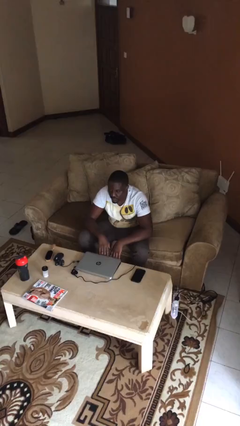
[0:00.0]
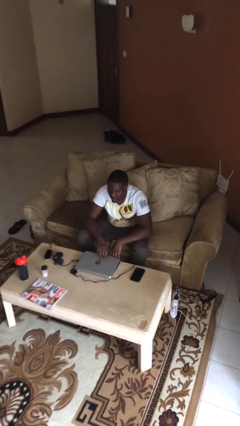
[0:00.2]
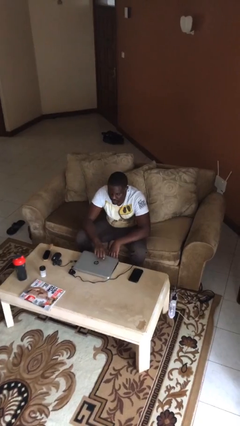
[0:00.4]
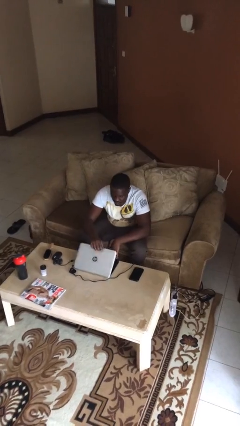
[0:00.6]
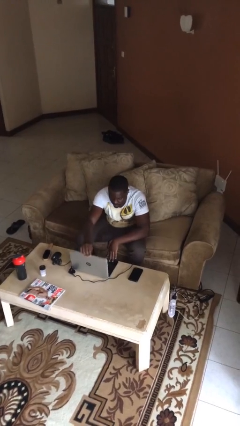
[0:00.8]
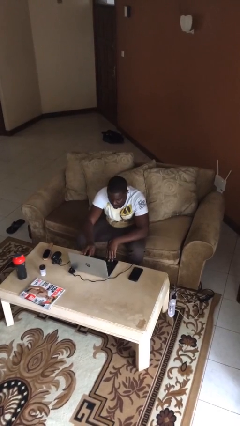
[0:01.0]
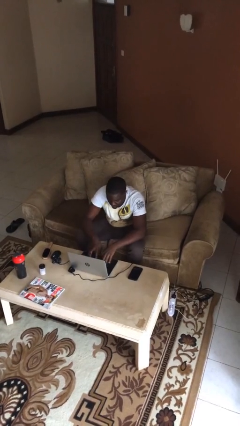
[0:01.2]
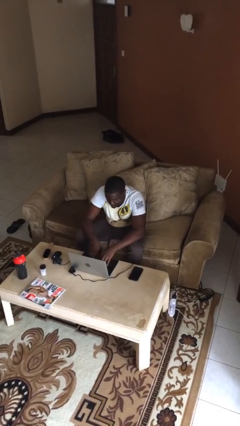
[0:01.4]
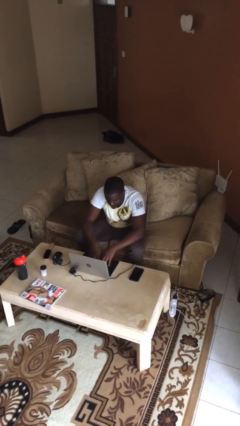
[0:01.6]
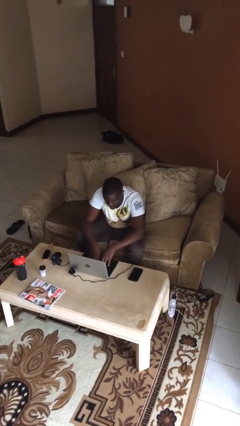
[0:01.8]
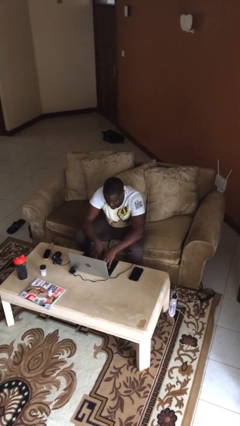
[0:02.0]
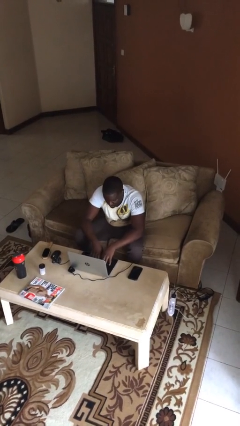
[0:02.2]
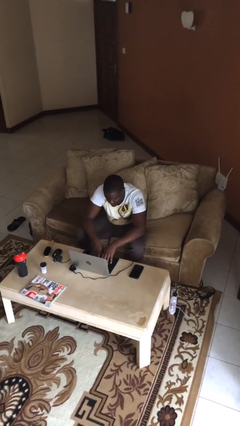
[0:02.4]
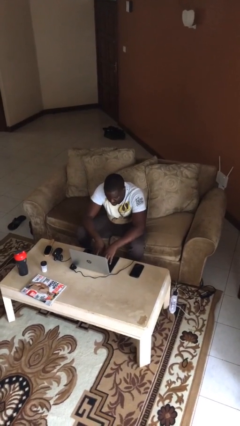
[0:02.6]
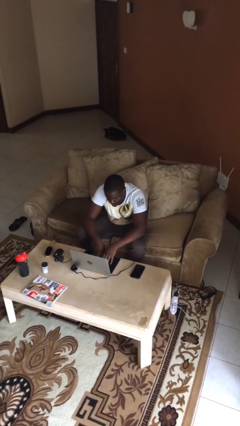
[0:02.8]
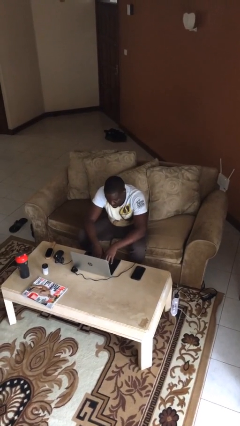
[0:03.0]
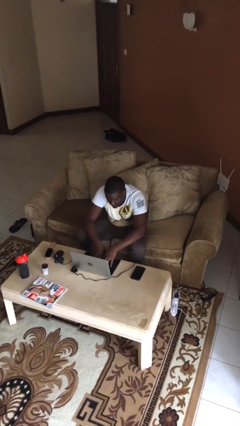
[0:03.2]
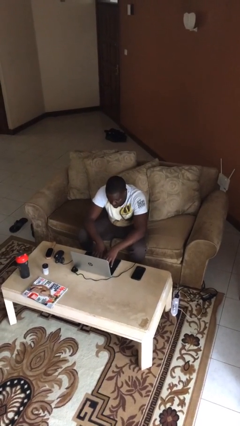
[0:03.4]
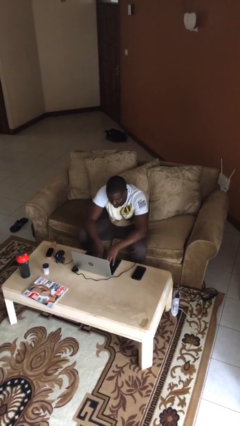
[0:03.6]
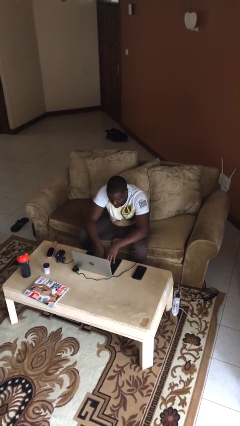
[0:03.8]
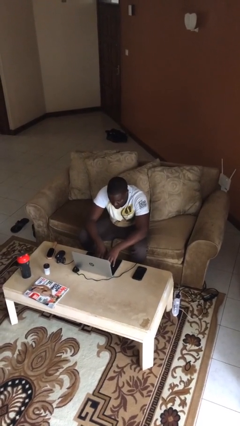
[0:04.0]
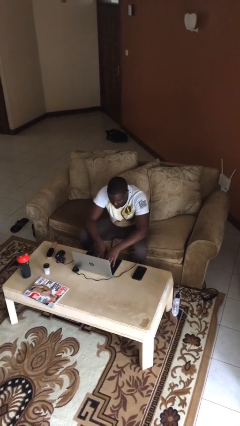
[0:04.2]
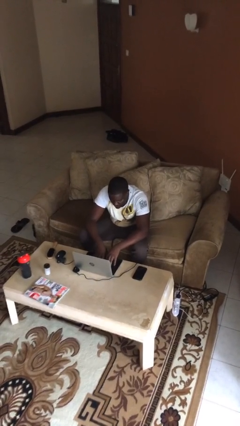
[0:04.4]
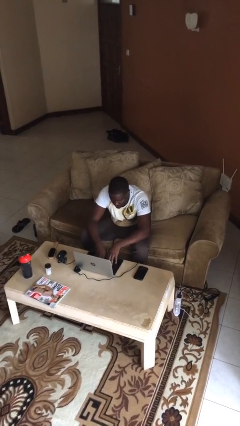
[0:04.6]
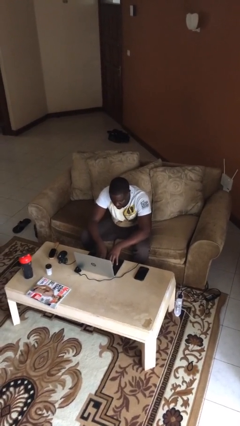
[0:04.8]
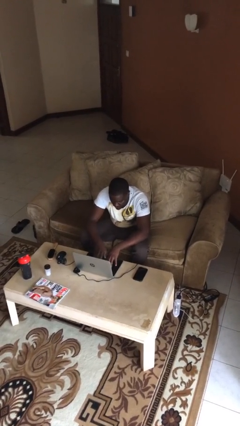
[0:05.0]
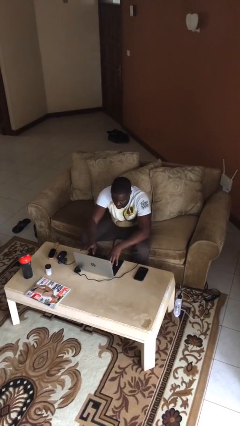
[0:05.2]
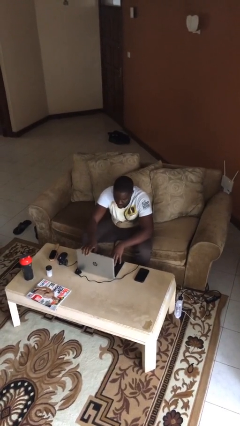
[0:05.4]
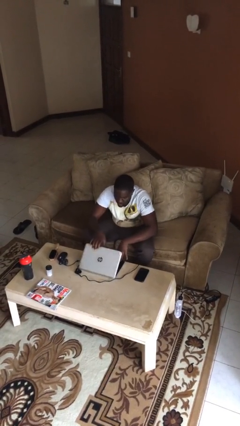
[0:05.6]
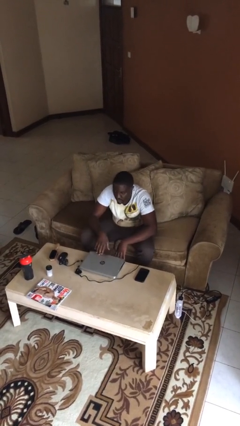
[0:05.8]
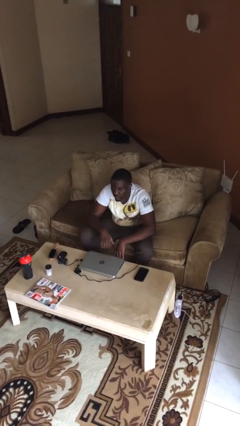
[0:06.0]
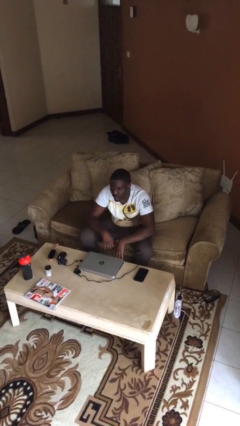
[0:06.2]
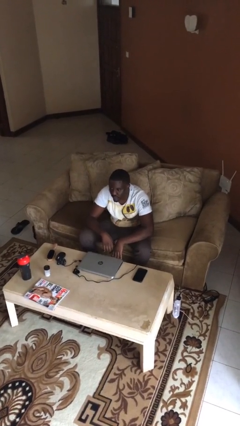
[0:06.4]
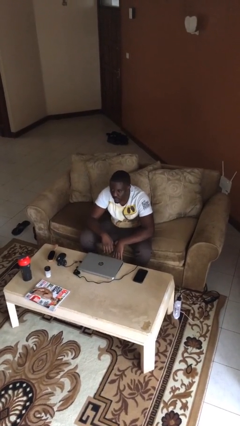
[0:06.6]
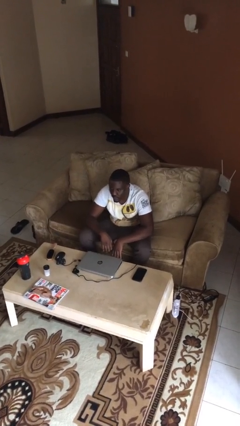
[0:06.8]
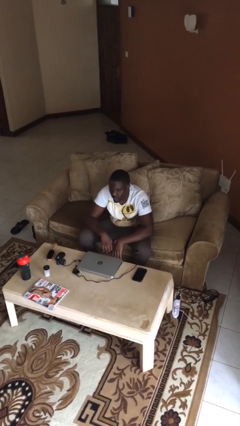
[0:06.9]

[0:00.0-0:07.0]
person interacts with laptop

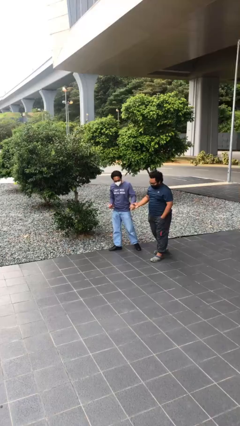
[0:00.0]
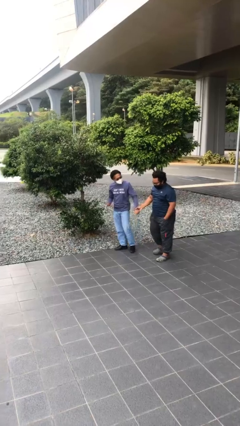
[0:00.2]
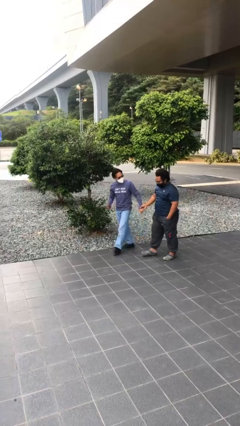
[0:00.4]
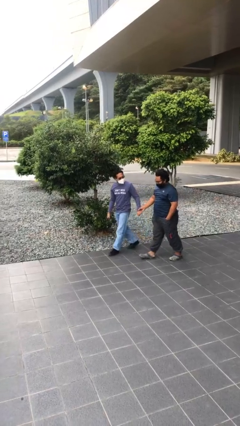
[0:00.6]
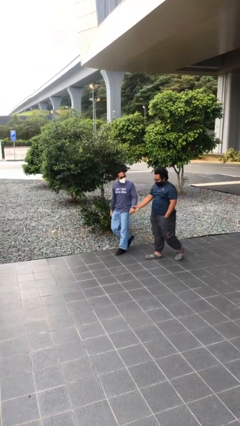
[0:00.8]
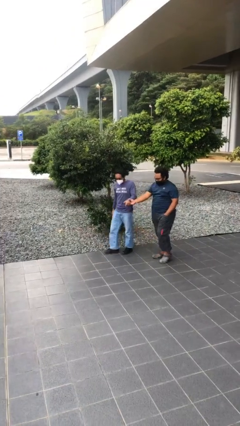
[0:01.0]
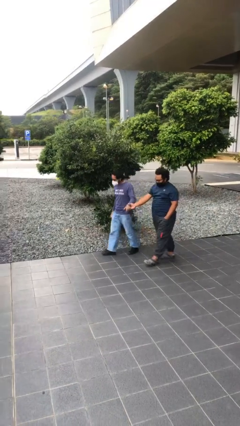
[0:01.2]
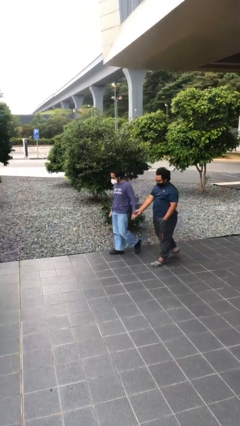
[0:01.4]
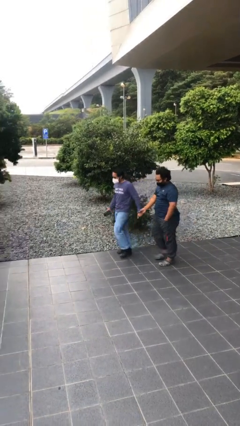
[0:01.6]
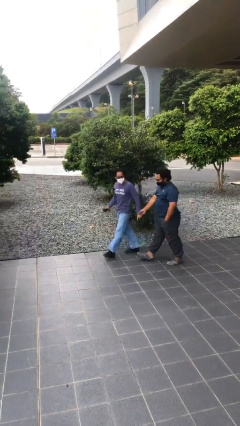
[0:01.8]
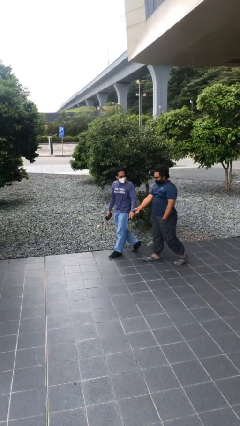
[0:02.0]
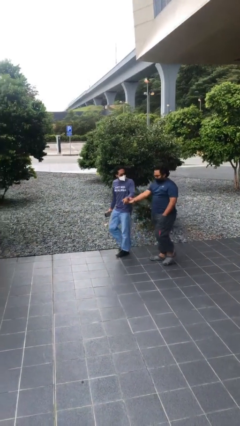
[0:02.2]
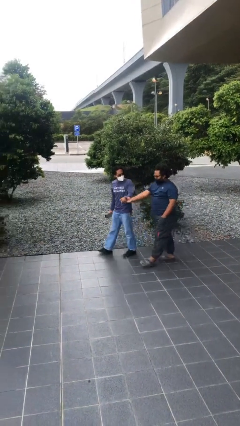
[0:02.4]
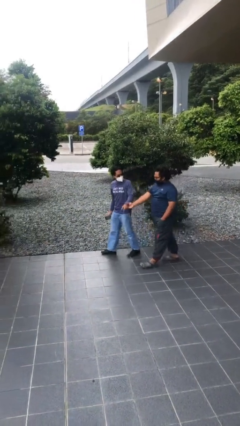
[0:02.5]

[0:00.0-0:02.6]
person holds hand

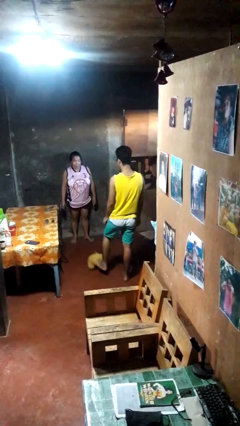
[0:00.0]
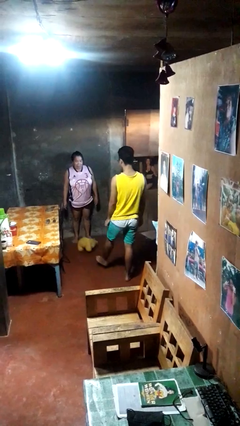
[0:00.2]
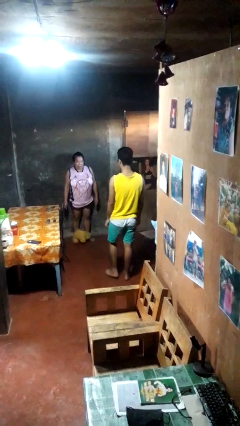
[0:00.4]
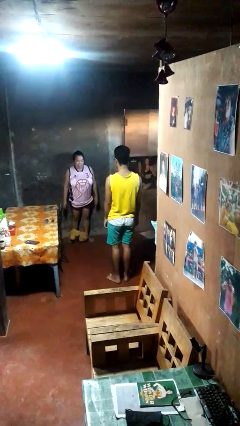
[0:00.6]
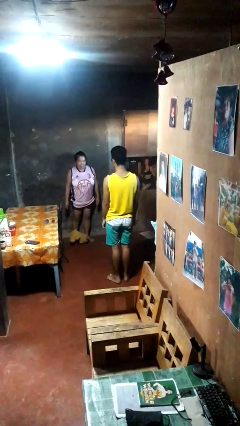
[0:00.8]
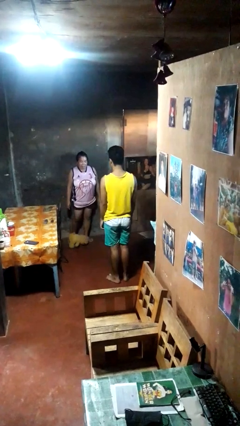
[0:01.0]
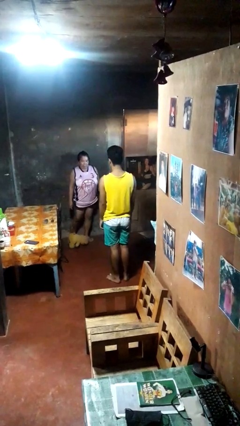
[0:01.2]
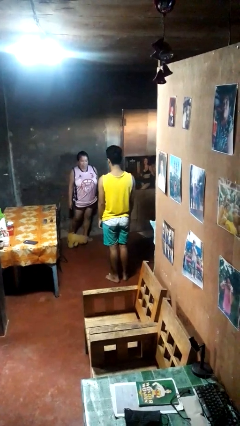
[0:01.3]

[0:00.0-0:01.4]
person kicks object to person

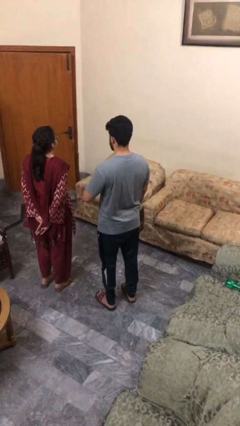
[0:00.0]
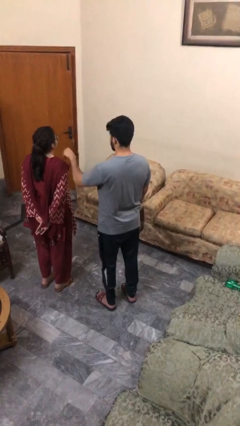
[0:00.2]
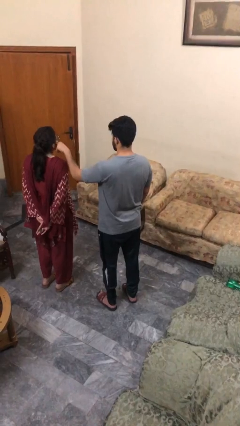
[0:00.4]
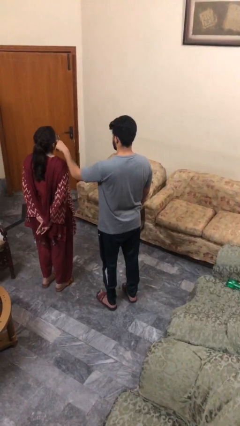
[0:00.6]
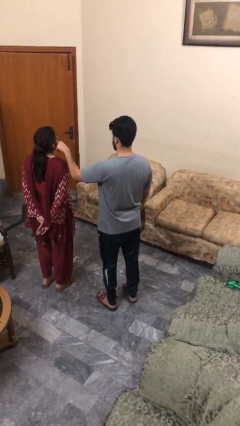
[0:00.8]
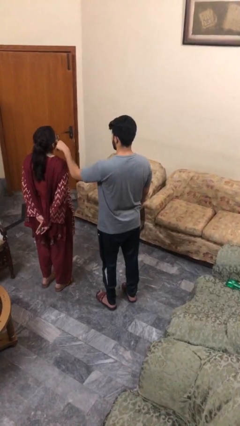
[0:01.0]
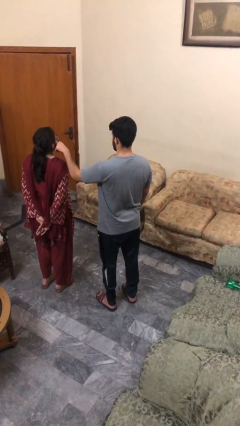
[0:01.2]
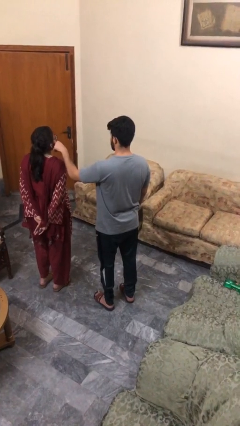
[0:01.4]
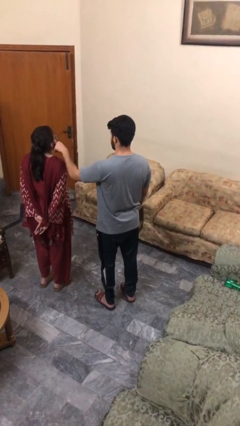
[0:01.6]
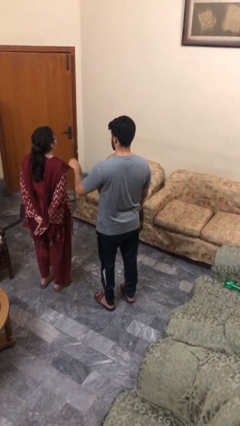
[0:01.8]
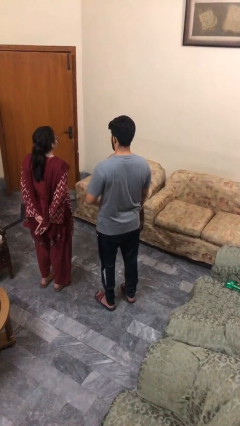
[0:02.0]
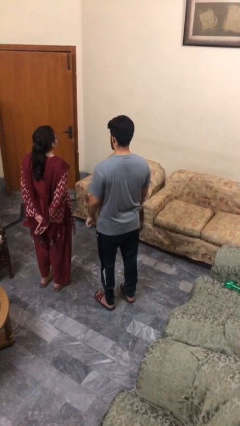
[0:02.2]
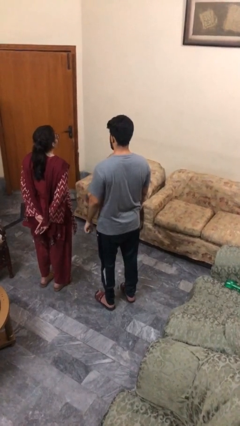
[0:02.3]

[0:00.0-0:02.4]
person touches face of person

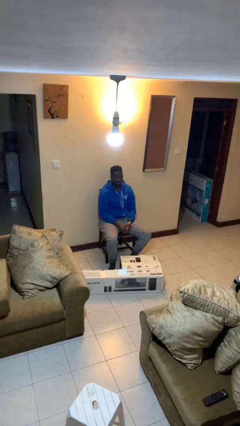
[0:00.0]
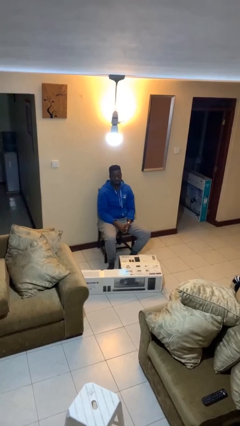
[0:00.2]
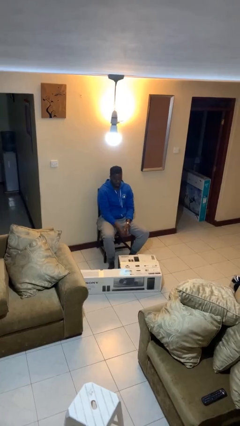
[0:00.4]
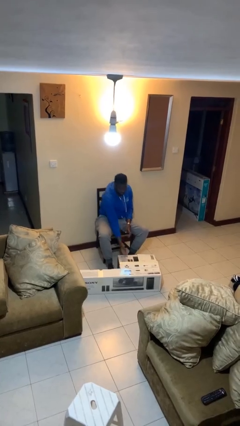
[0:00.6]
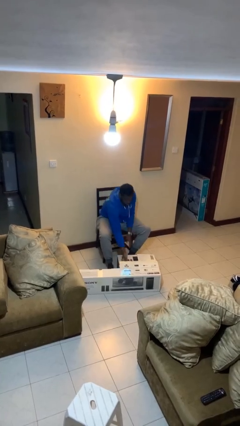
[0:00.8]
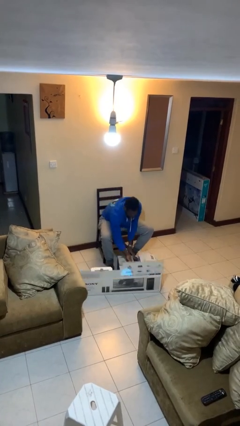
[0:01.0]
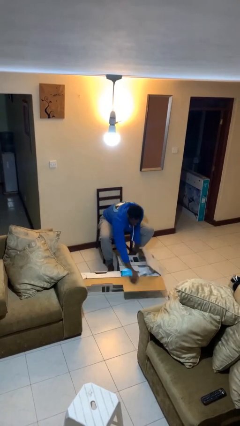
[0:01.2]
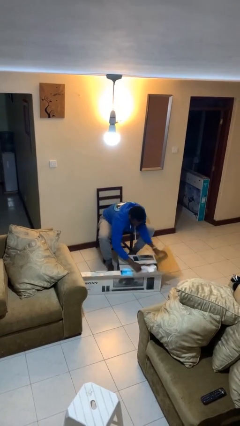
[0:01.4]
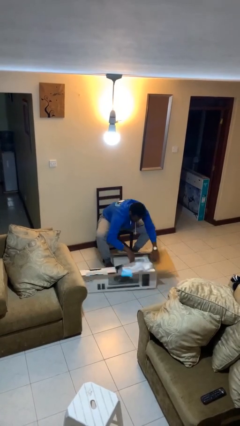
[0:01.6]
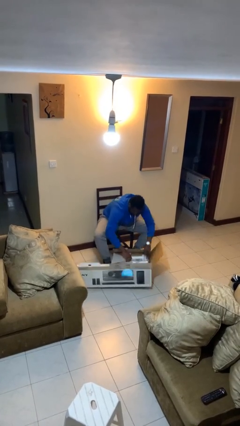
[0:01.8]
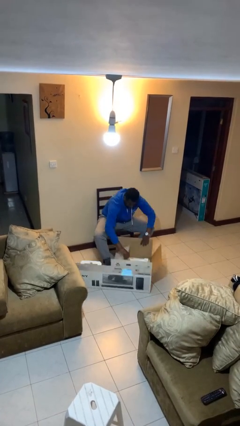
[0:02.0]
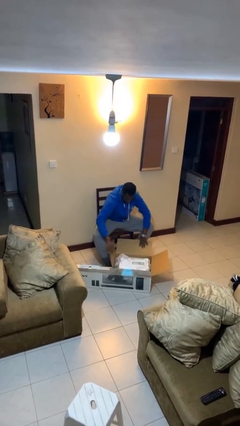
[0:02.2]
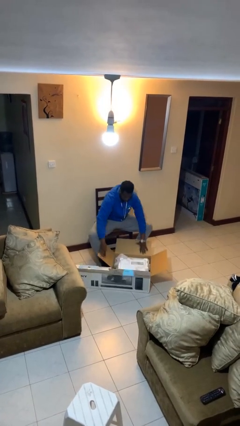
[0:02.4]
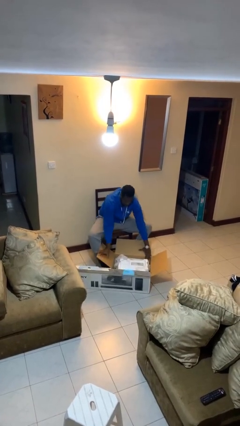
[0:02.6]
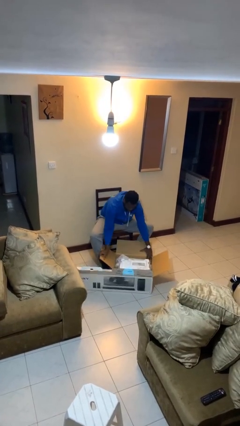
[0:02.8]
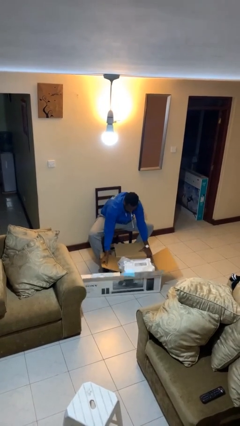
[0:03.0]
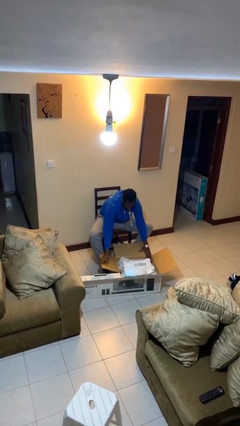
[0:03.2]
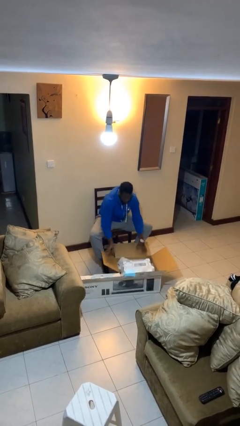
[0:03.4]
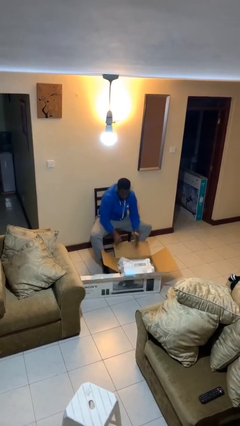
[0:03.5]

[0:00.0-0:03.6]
person opens box

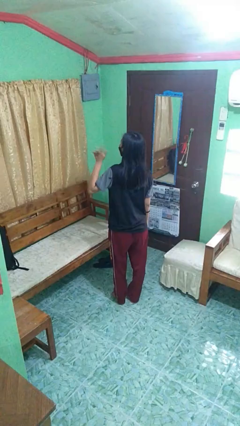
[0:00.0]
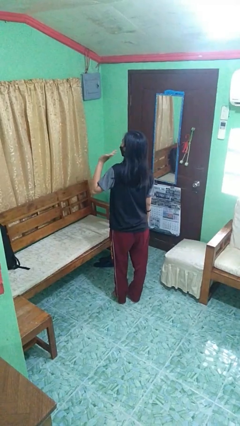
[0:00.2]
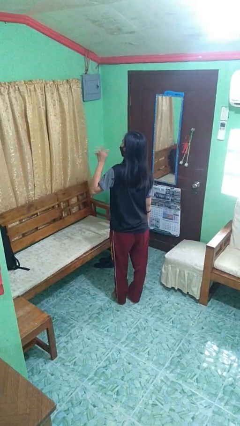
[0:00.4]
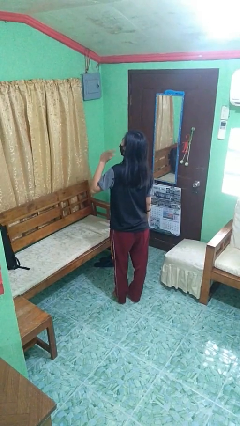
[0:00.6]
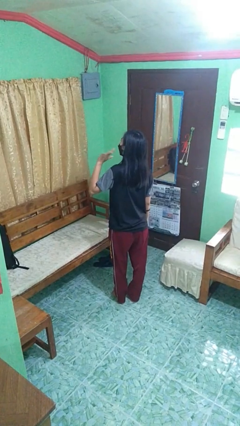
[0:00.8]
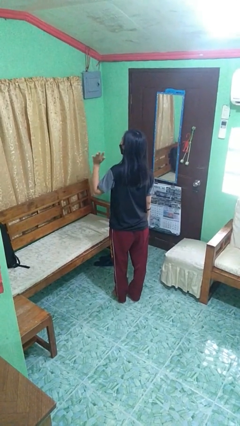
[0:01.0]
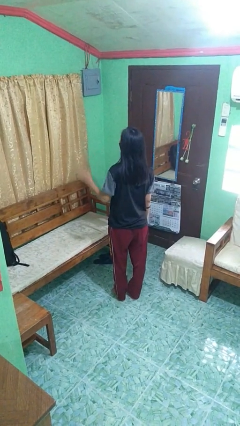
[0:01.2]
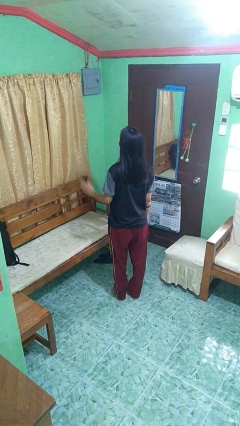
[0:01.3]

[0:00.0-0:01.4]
person waves at person
